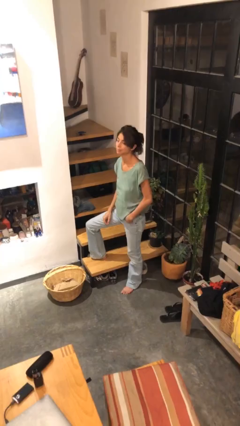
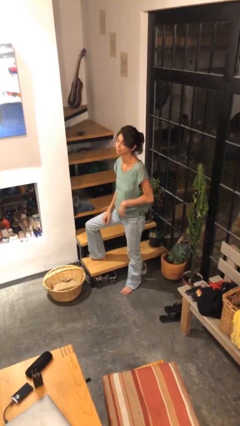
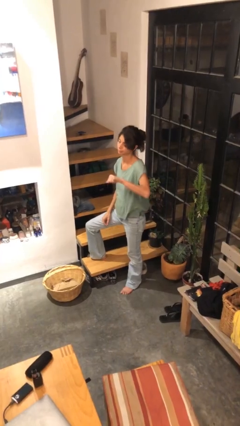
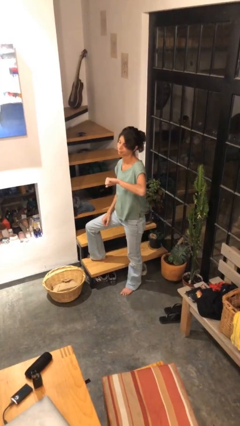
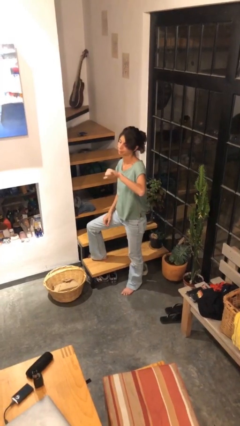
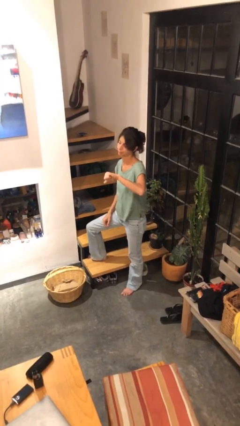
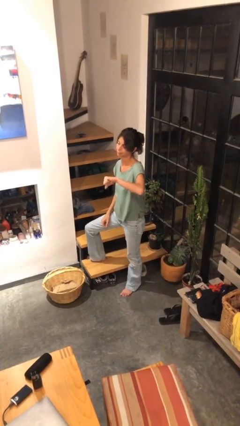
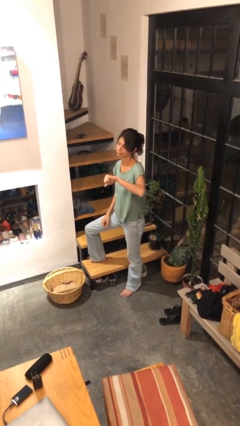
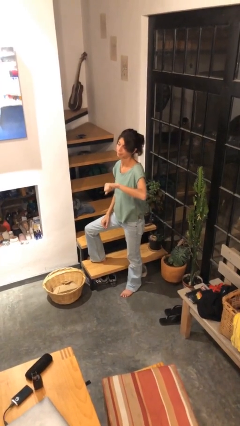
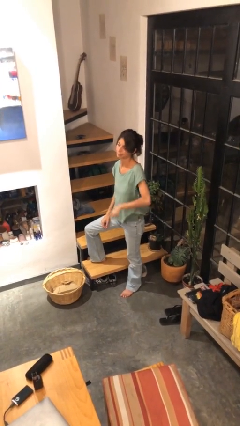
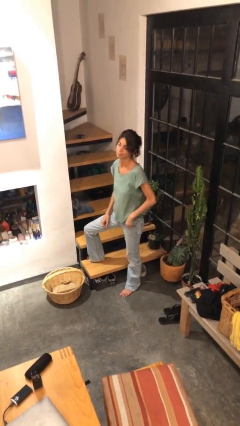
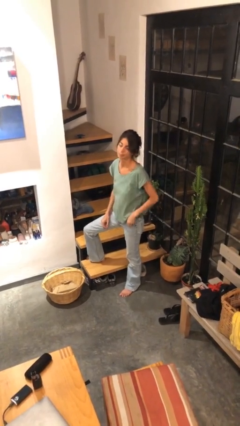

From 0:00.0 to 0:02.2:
person gestures thumbs down

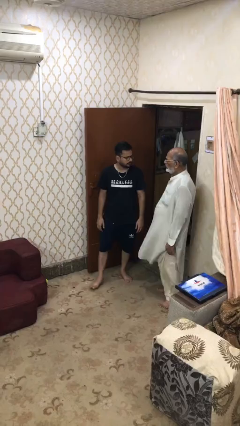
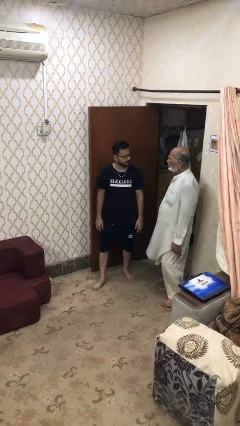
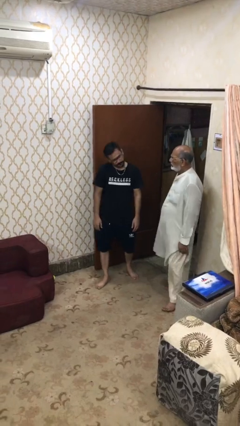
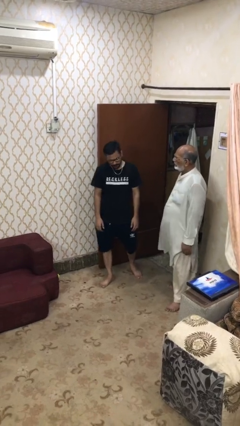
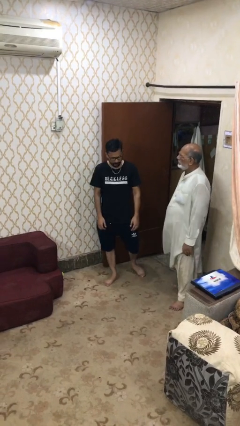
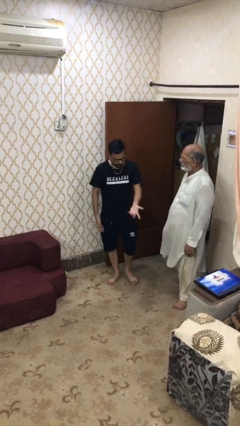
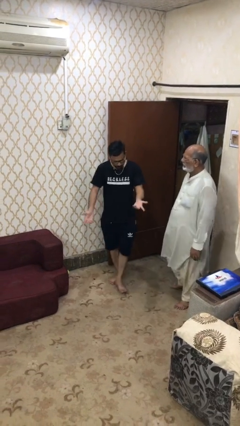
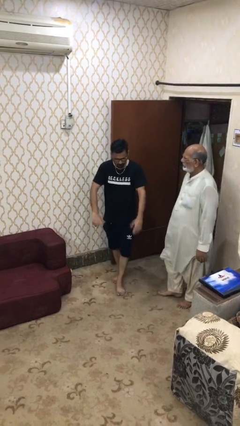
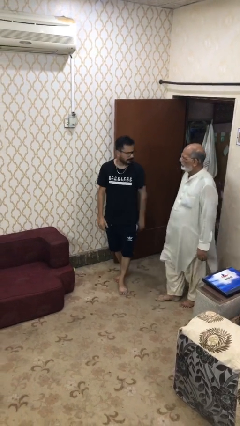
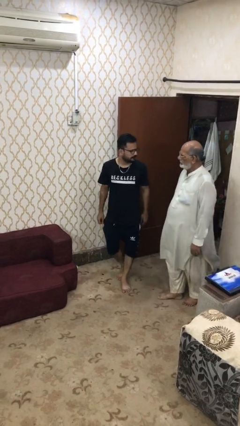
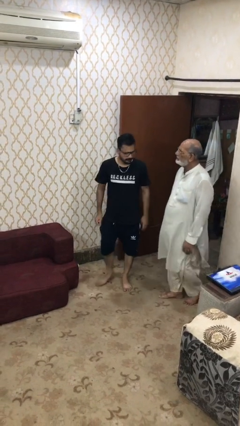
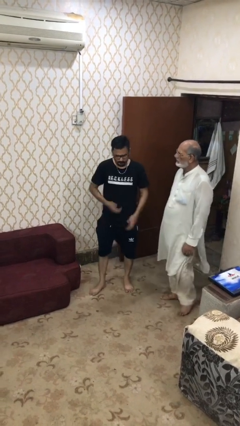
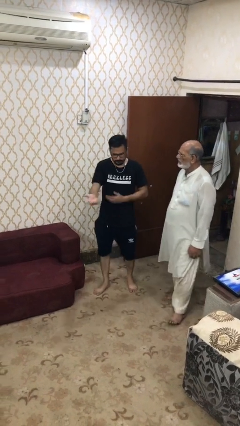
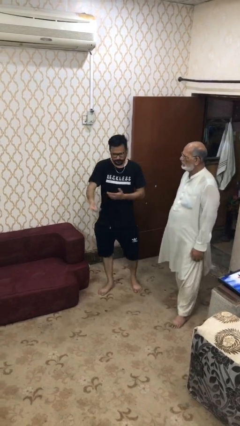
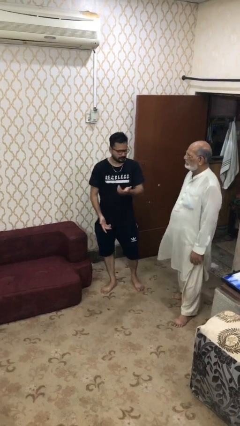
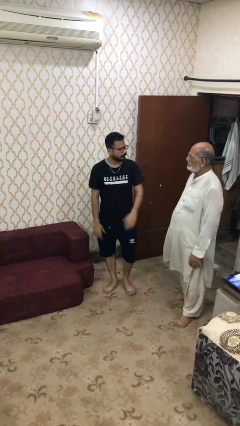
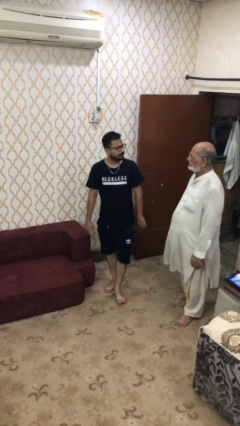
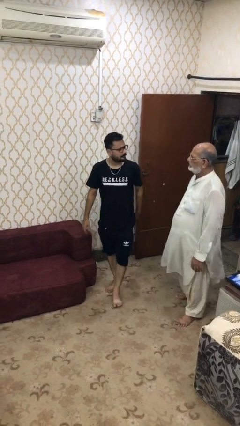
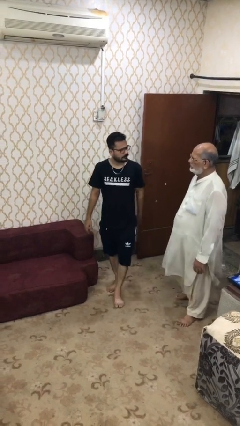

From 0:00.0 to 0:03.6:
person talks to person

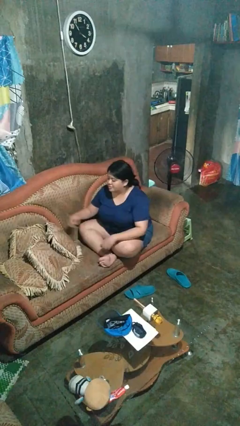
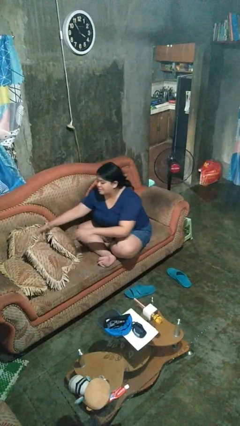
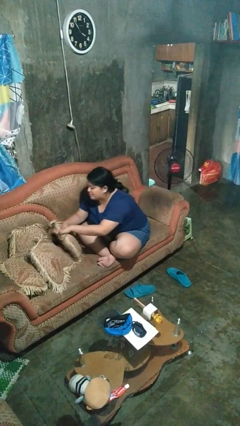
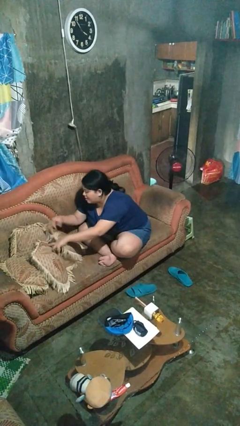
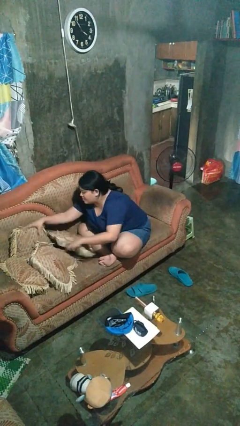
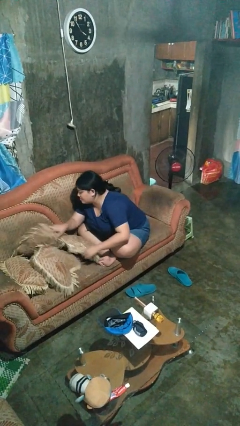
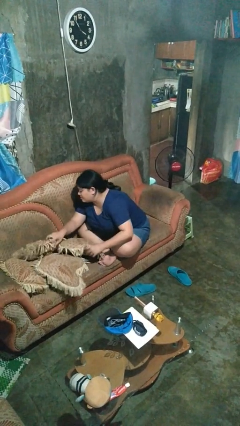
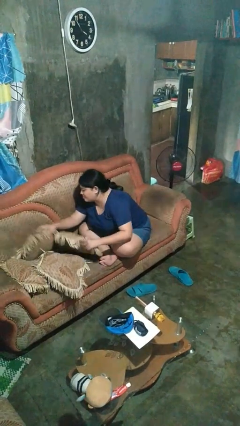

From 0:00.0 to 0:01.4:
person searches in couch

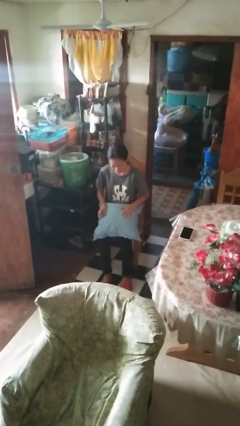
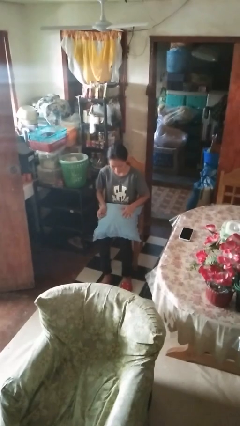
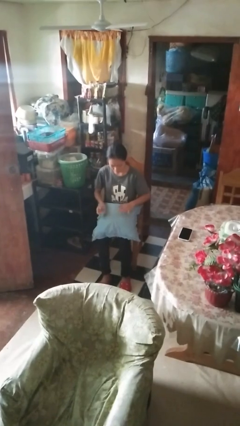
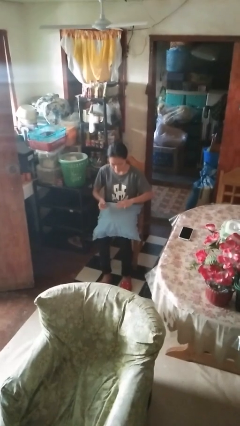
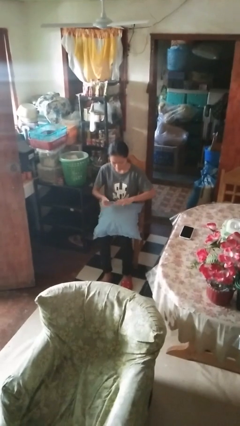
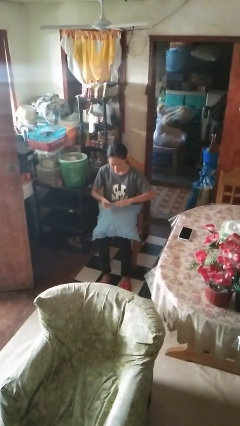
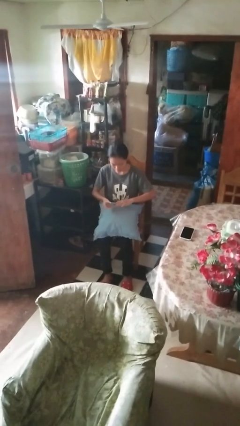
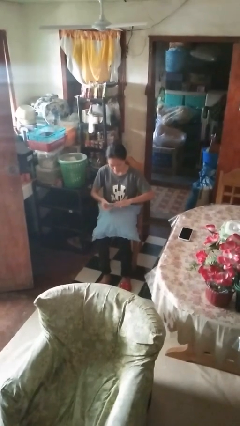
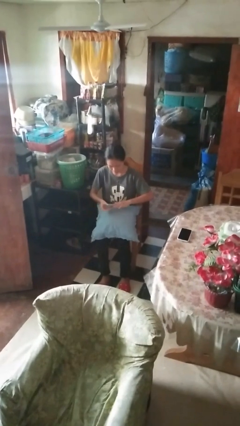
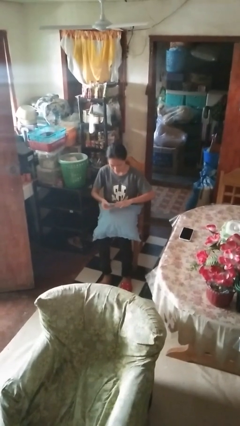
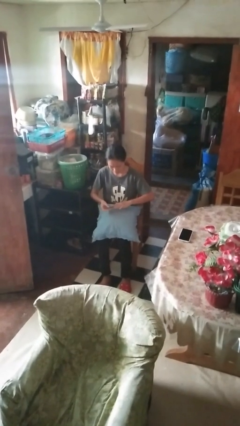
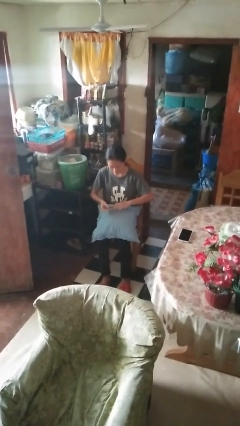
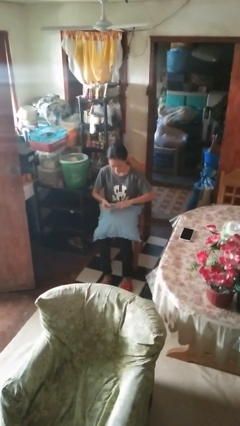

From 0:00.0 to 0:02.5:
person clips fingernails

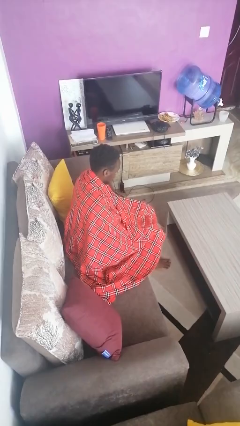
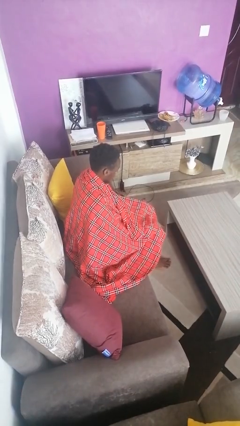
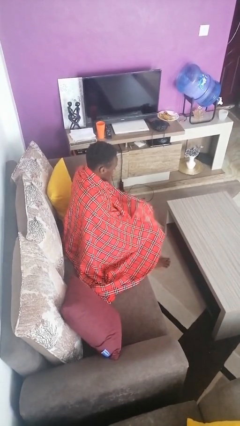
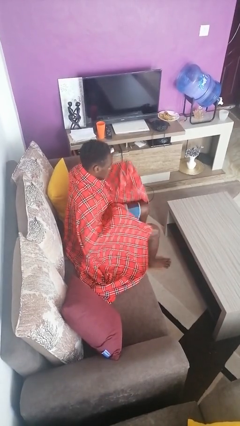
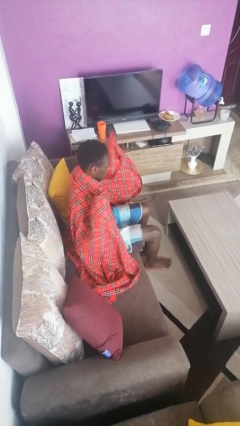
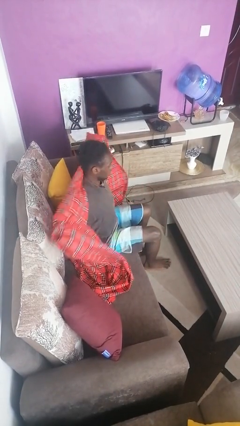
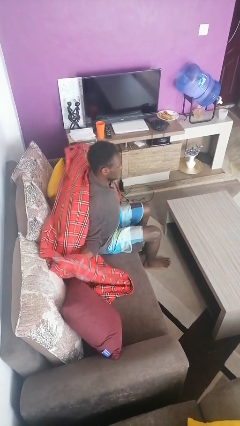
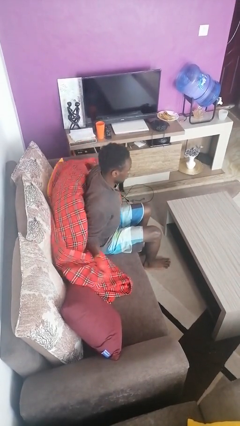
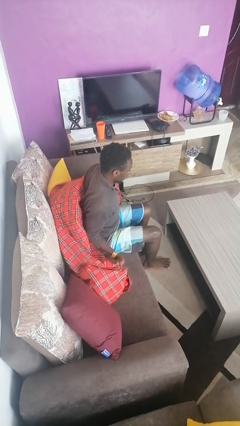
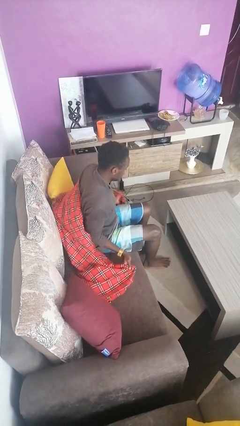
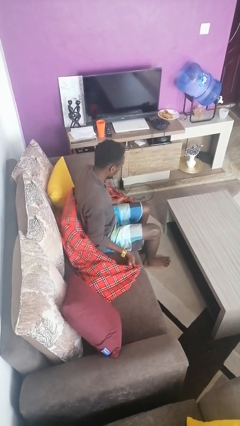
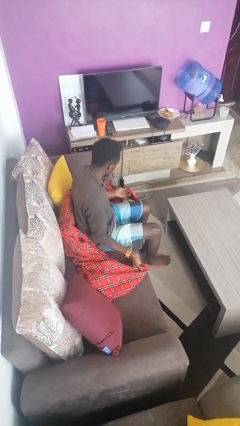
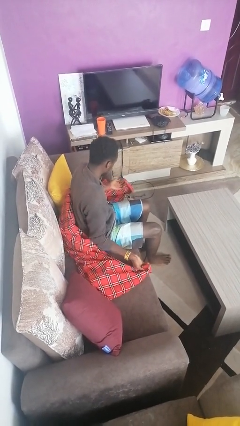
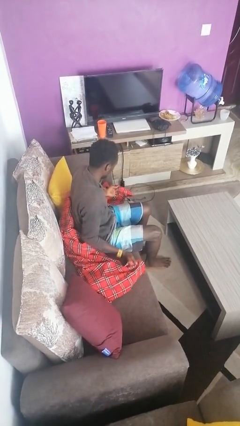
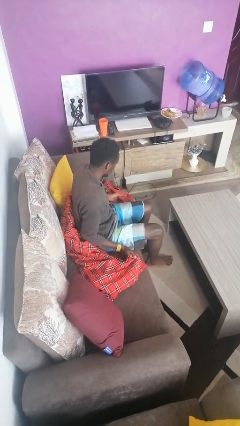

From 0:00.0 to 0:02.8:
person uncovers with blanket

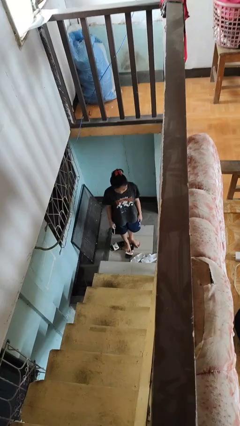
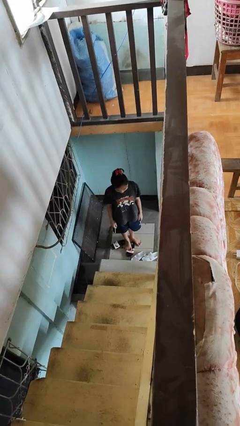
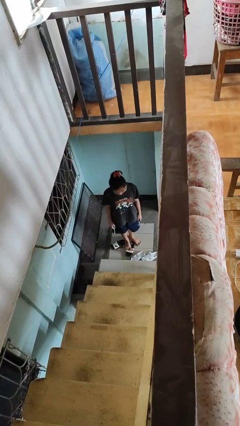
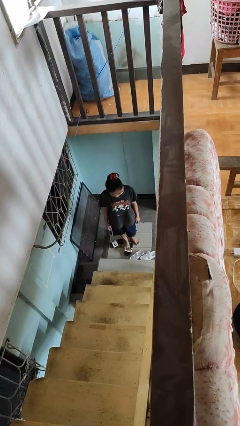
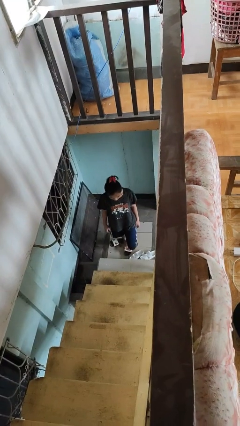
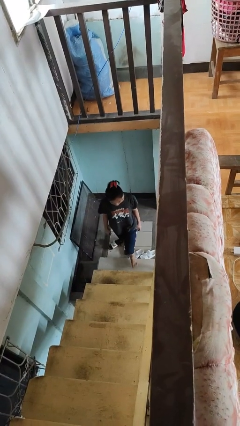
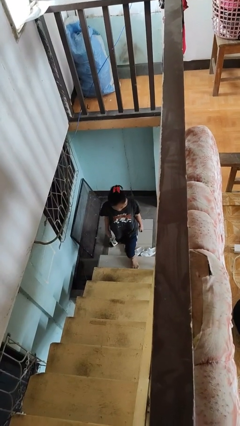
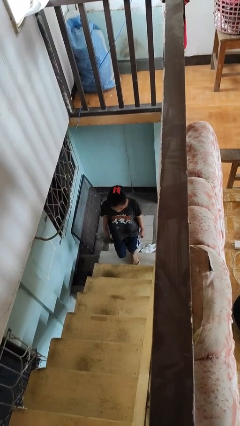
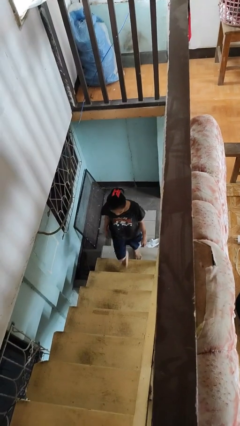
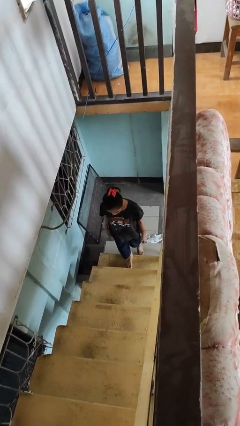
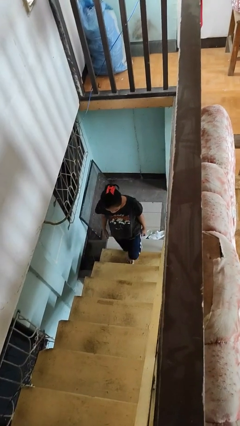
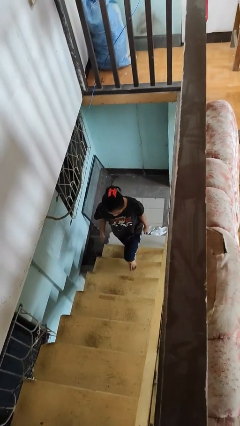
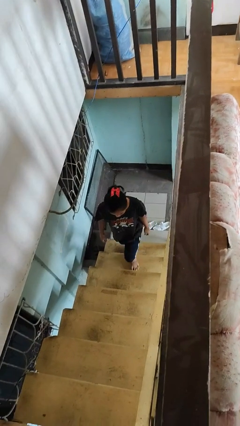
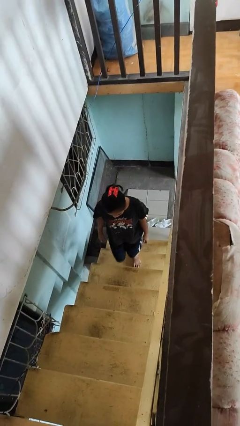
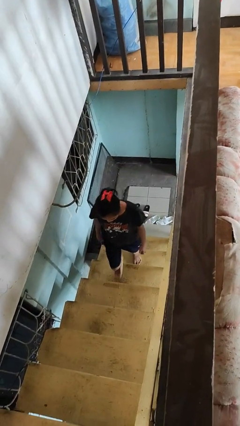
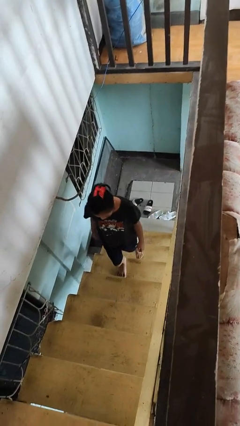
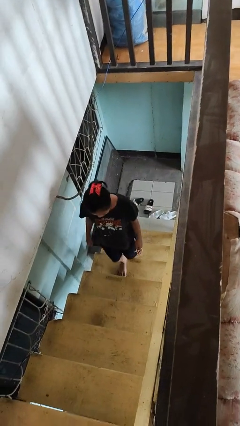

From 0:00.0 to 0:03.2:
person climbs up stairs

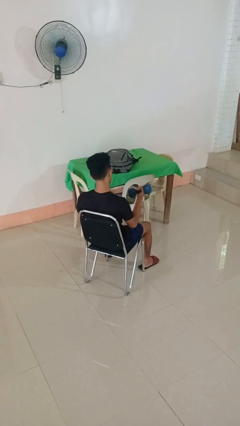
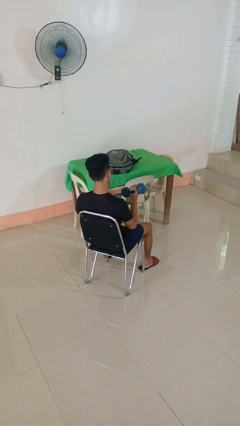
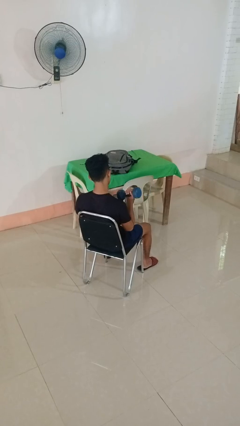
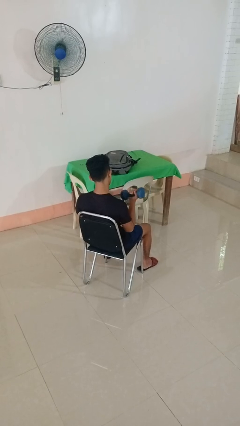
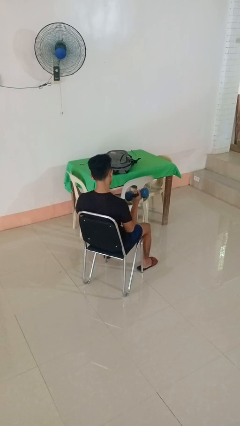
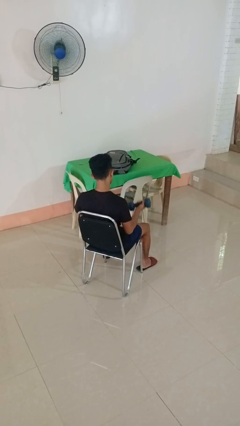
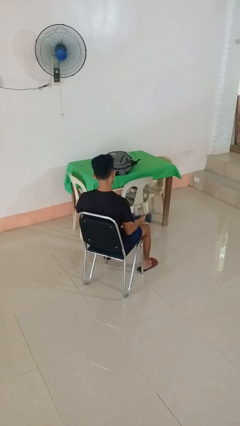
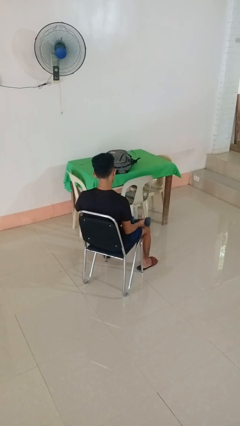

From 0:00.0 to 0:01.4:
person lifts dumbbells

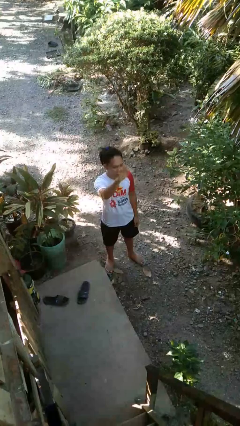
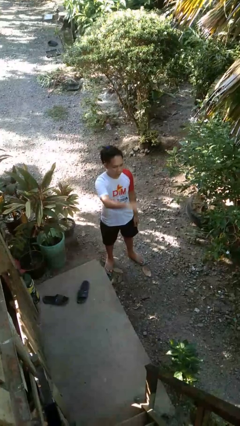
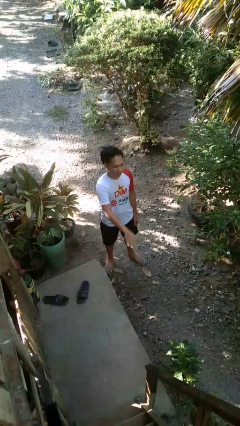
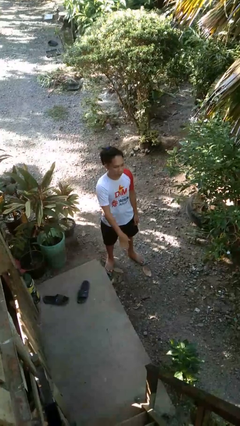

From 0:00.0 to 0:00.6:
person gestures swipe down
